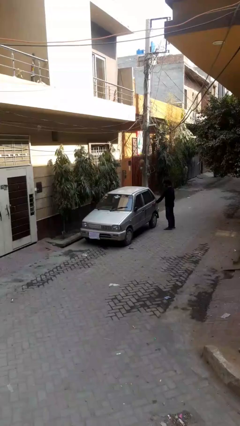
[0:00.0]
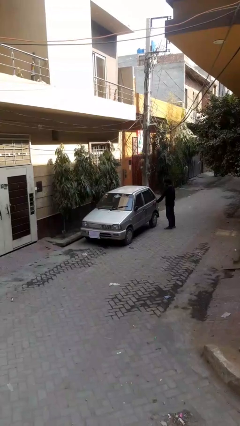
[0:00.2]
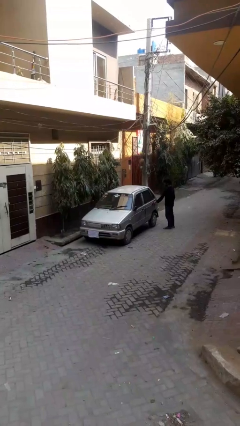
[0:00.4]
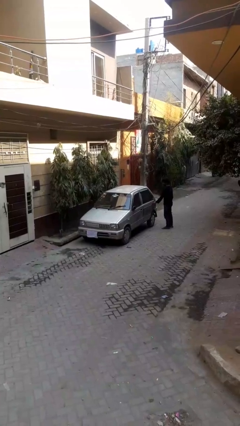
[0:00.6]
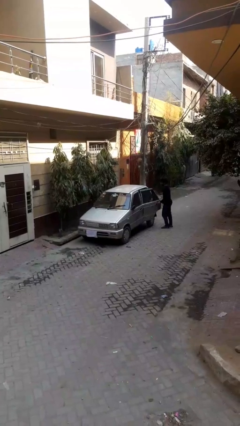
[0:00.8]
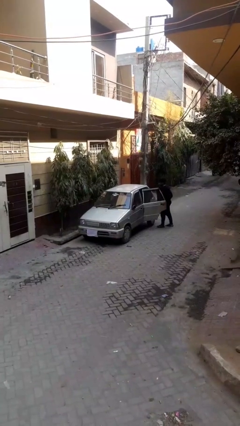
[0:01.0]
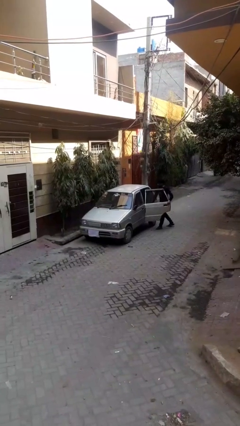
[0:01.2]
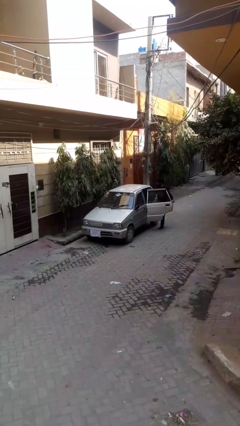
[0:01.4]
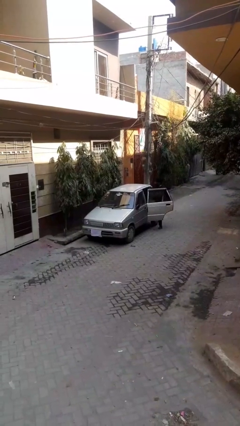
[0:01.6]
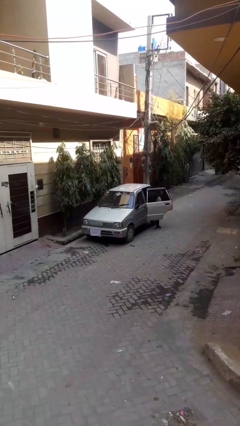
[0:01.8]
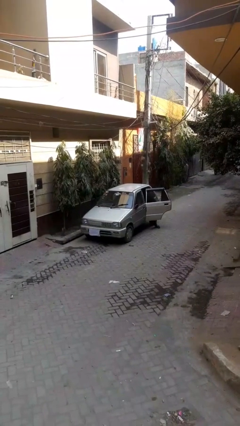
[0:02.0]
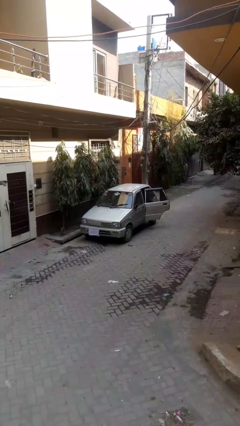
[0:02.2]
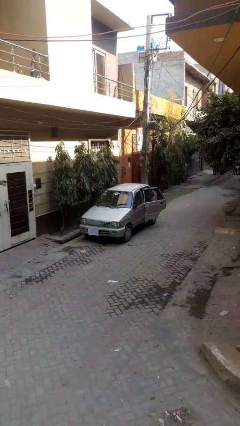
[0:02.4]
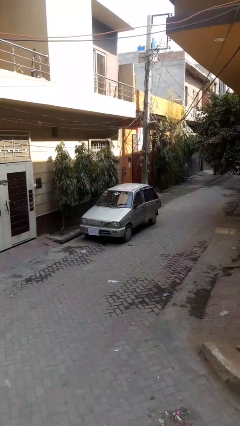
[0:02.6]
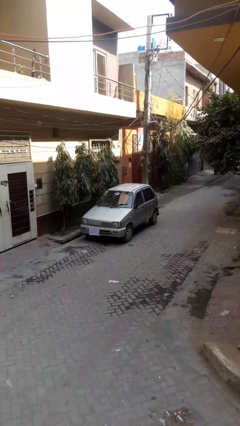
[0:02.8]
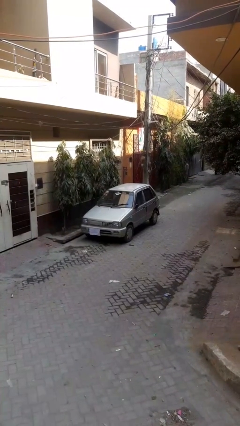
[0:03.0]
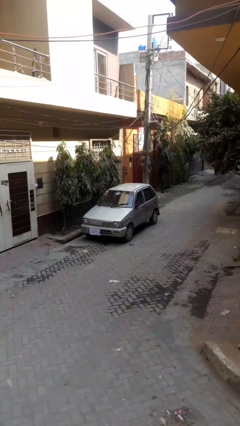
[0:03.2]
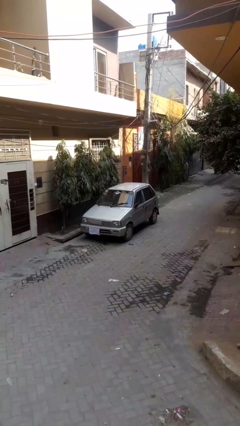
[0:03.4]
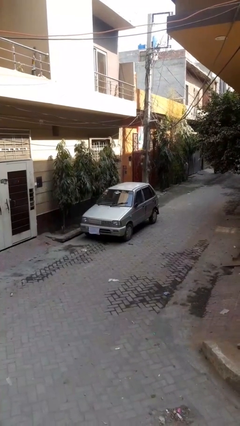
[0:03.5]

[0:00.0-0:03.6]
car picks up person

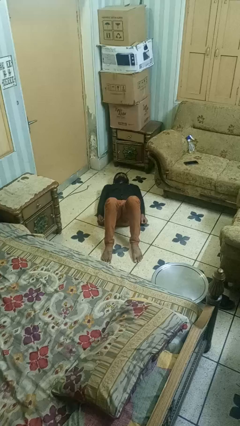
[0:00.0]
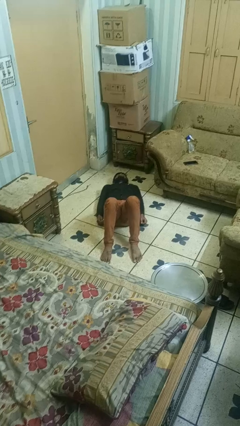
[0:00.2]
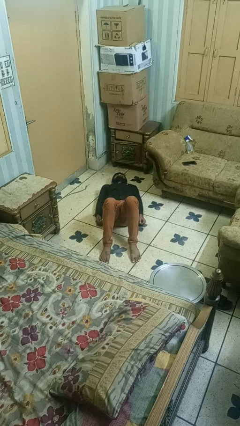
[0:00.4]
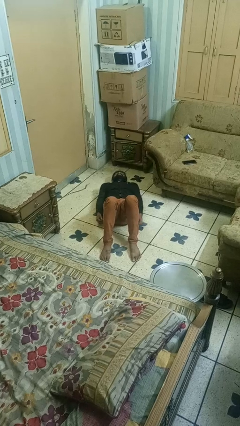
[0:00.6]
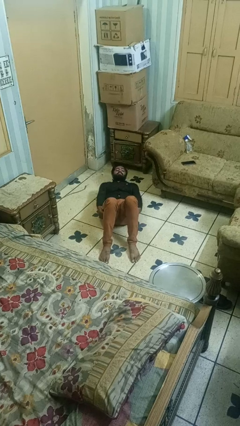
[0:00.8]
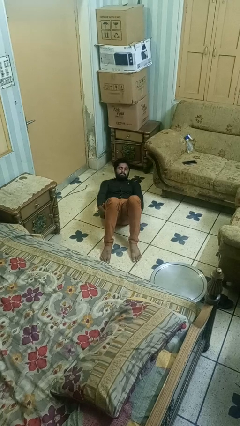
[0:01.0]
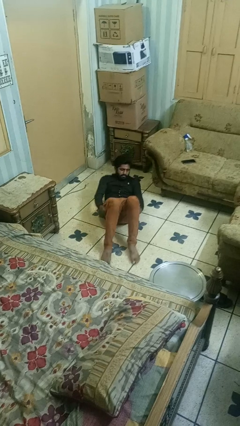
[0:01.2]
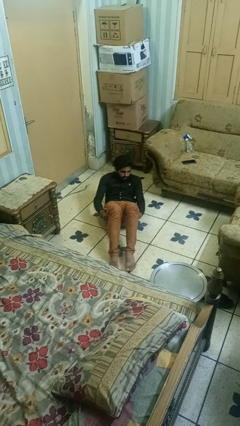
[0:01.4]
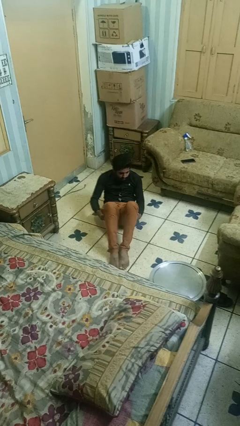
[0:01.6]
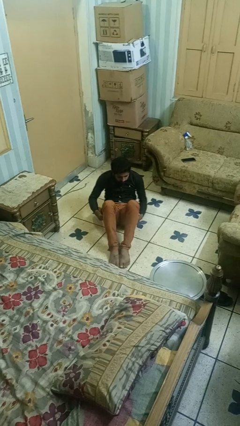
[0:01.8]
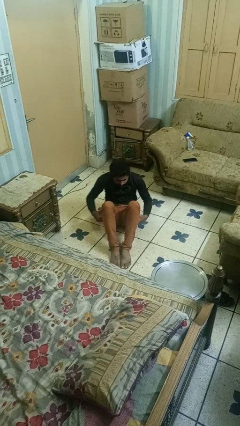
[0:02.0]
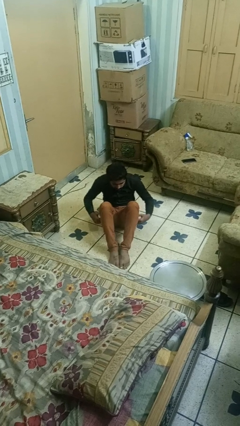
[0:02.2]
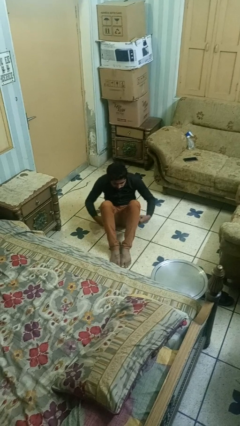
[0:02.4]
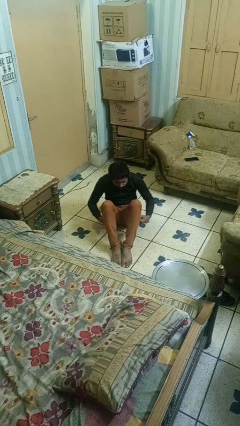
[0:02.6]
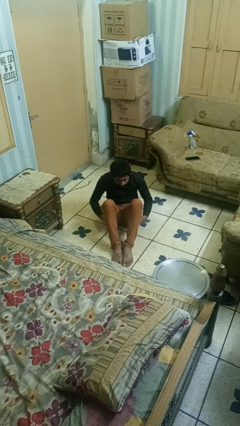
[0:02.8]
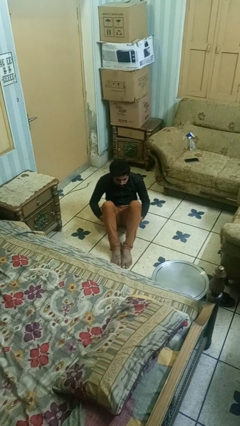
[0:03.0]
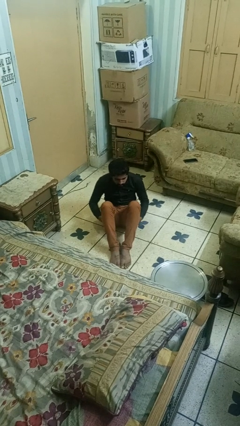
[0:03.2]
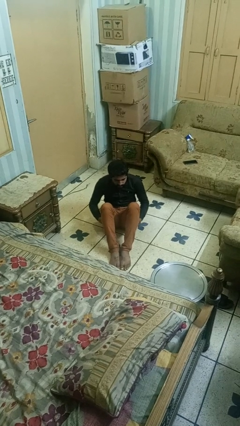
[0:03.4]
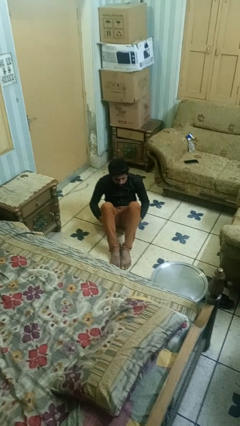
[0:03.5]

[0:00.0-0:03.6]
person exercises with situp

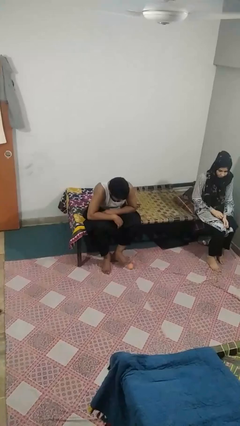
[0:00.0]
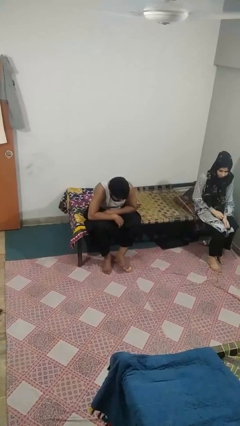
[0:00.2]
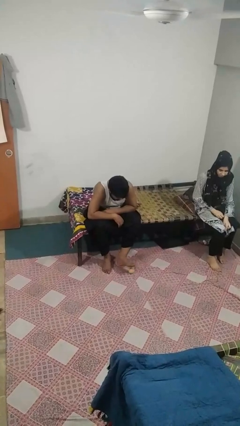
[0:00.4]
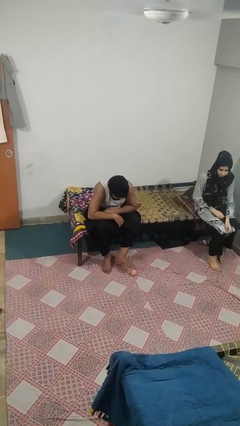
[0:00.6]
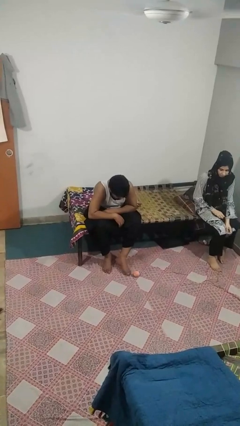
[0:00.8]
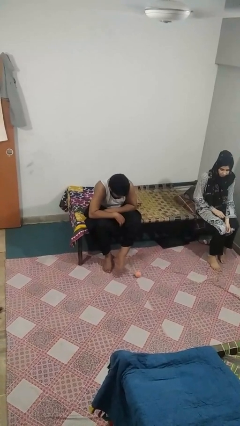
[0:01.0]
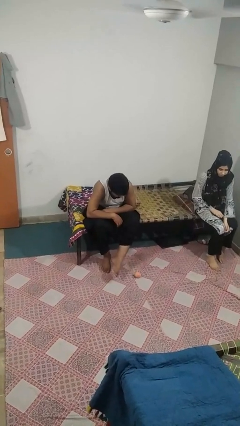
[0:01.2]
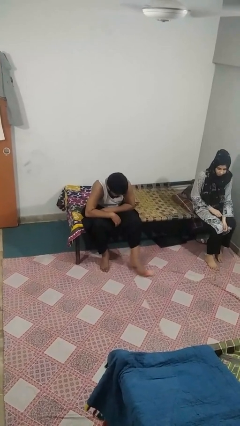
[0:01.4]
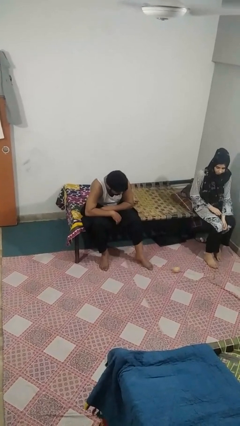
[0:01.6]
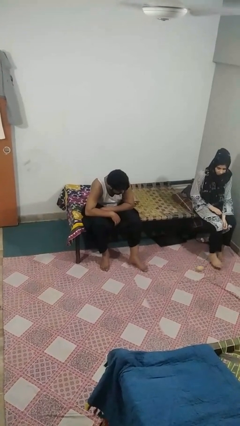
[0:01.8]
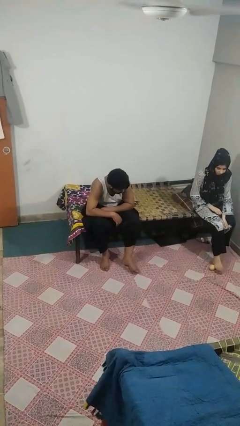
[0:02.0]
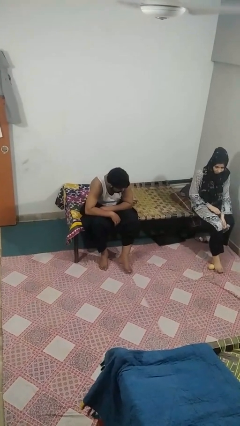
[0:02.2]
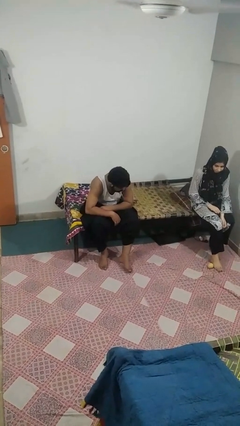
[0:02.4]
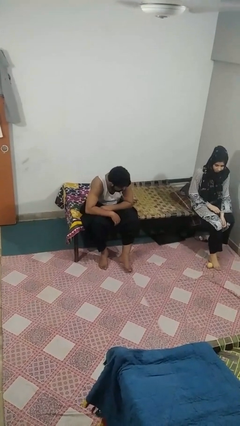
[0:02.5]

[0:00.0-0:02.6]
person kicks object to person

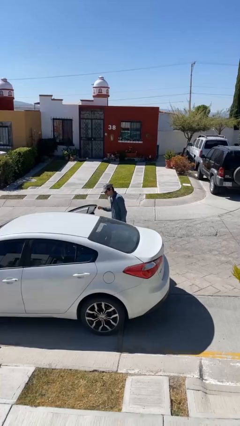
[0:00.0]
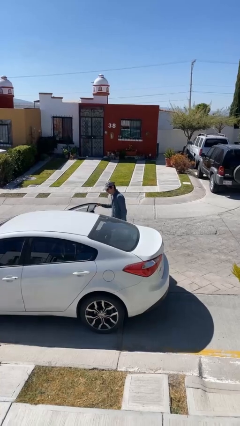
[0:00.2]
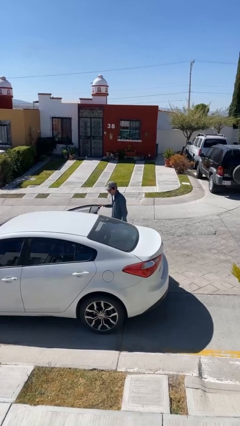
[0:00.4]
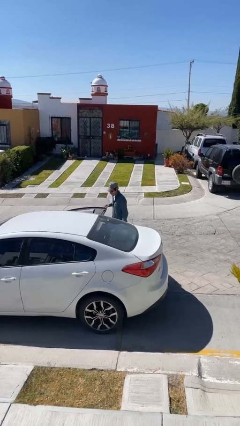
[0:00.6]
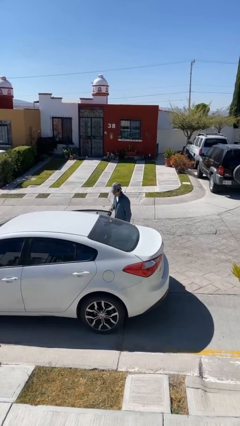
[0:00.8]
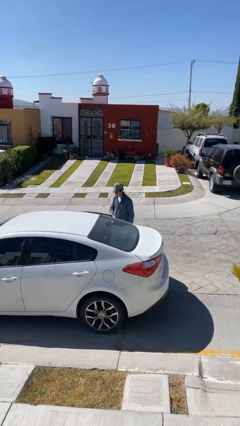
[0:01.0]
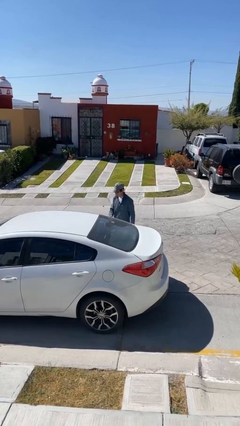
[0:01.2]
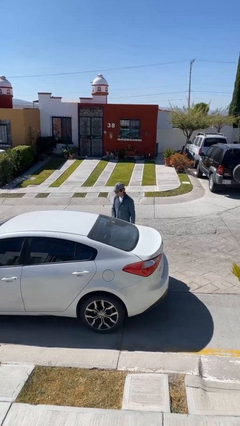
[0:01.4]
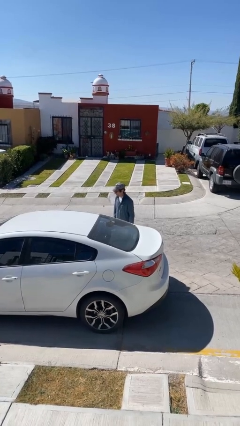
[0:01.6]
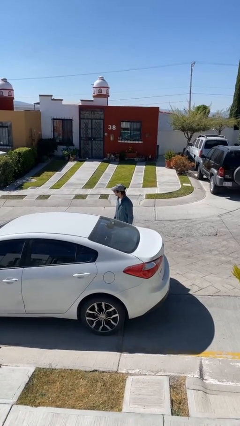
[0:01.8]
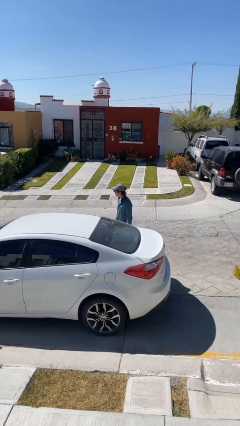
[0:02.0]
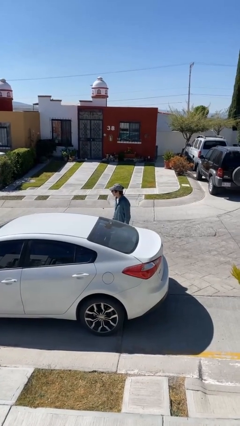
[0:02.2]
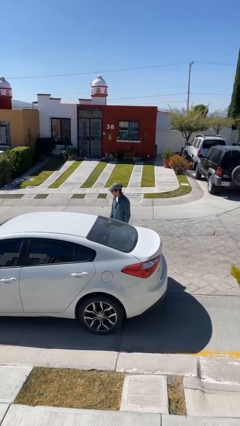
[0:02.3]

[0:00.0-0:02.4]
person closes car door

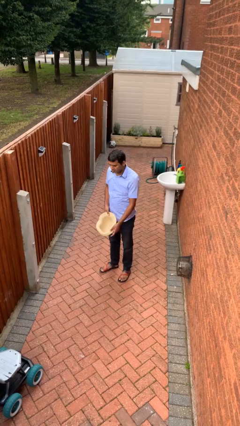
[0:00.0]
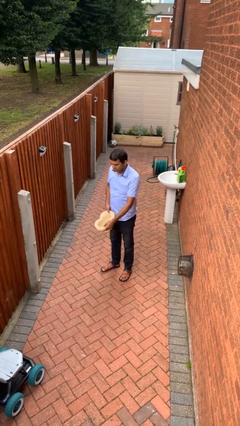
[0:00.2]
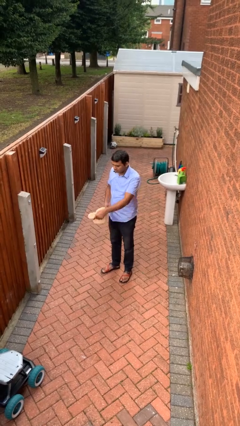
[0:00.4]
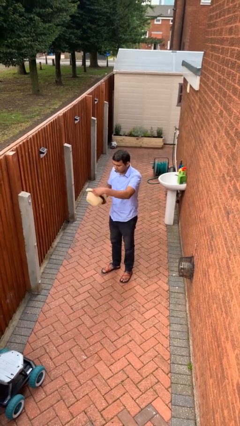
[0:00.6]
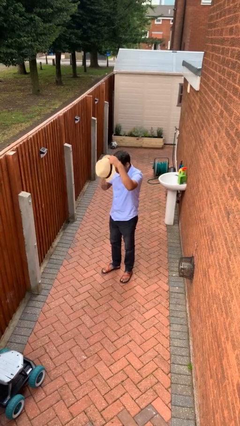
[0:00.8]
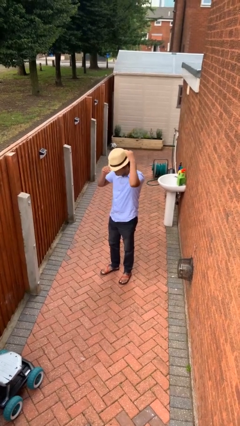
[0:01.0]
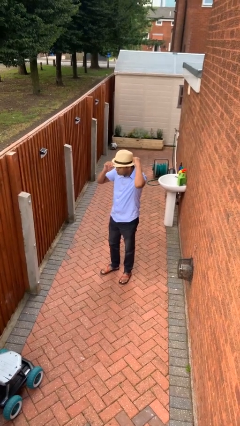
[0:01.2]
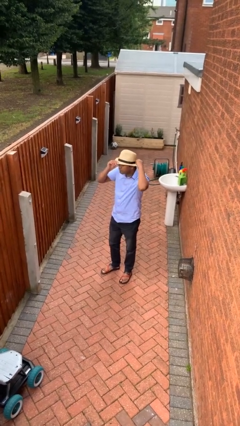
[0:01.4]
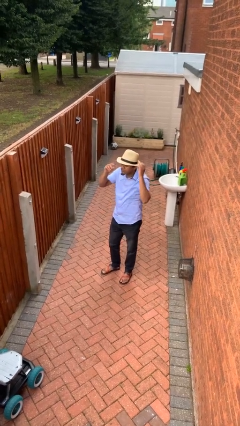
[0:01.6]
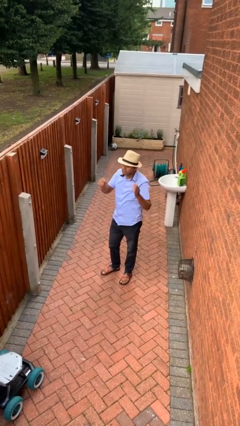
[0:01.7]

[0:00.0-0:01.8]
person puts on hat

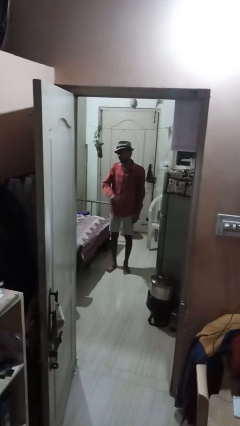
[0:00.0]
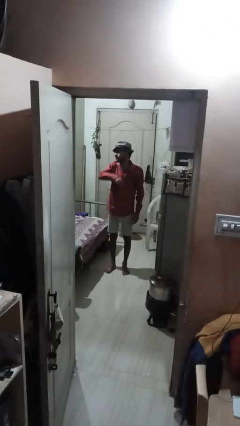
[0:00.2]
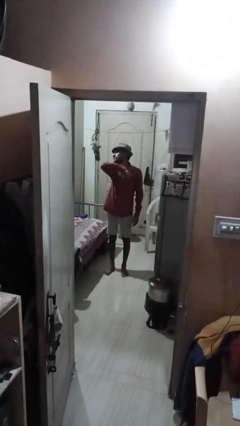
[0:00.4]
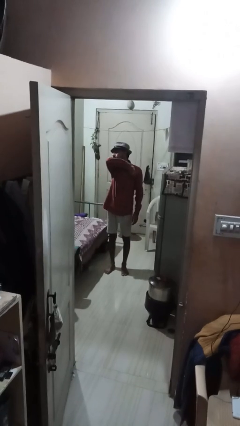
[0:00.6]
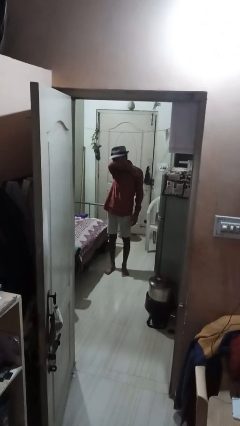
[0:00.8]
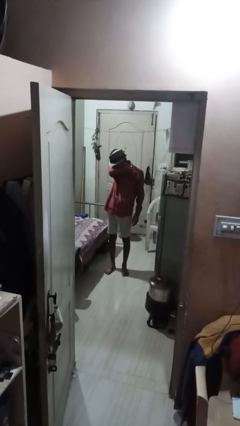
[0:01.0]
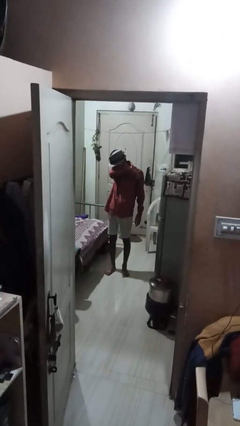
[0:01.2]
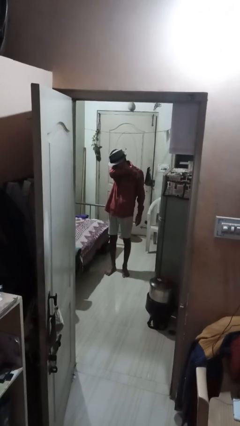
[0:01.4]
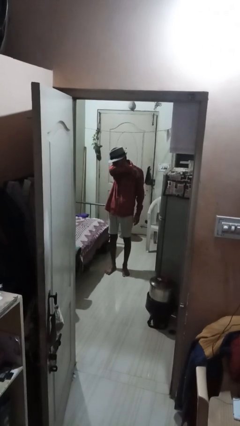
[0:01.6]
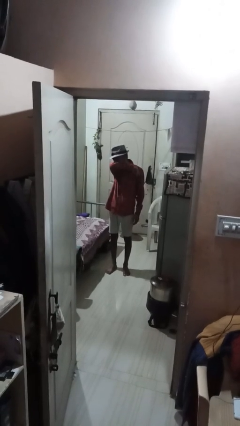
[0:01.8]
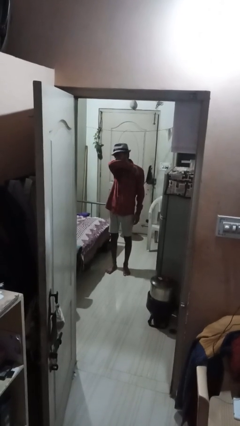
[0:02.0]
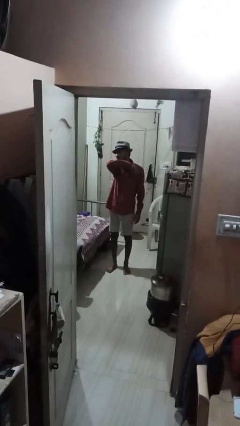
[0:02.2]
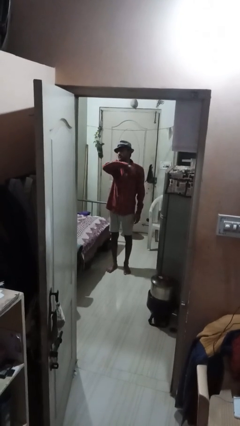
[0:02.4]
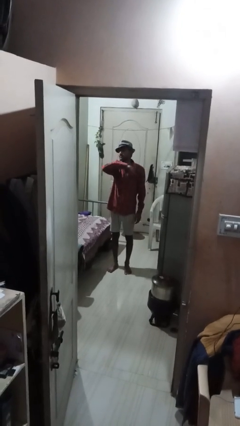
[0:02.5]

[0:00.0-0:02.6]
person sneezes into arm

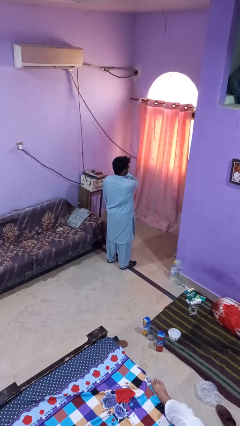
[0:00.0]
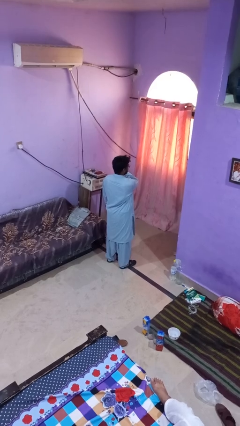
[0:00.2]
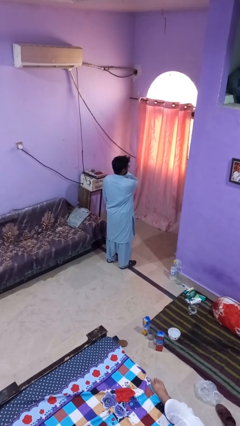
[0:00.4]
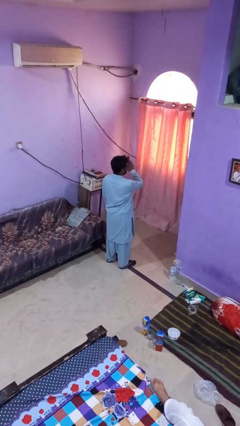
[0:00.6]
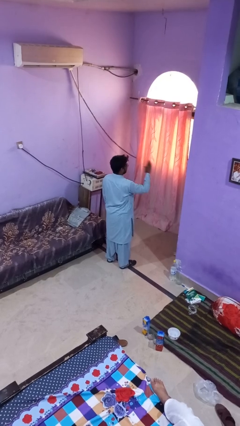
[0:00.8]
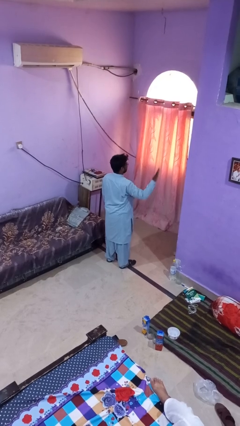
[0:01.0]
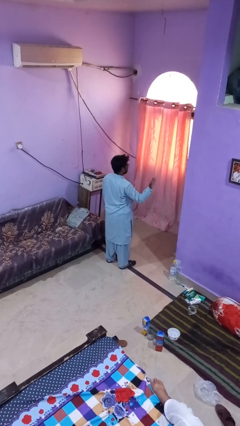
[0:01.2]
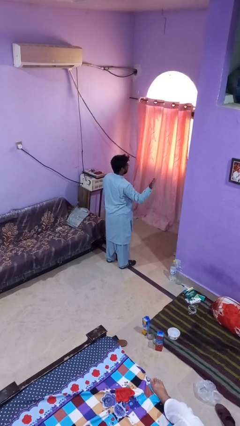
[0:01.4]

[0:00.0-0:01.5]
person gestures swipe right
